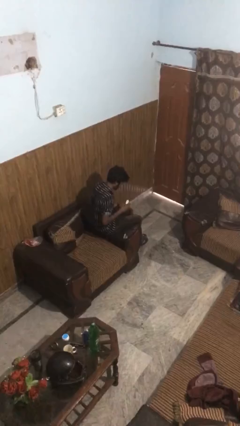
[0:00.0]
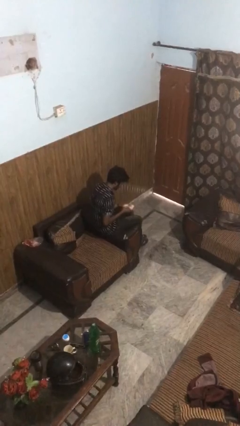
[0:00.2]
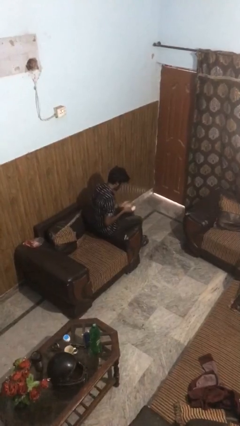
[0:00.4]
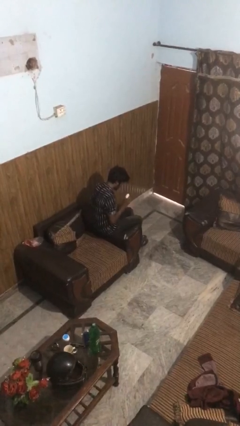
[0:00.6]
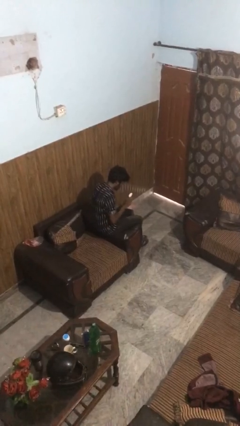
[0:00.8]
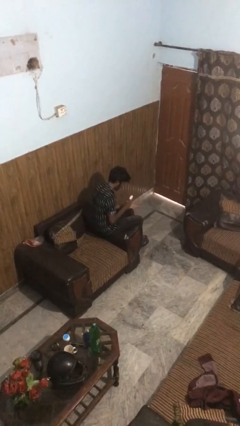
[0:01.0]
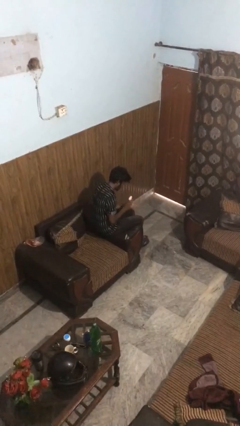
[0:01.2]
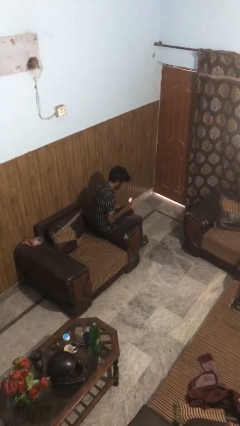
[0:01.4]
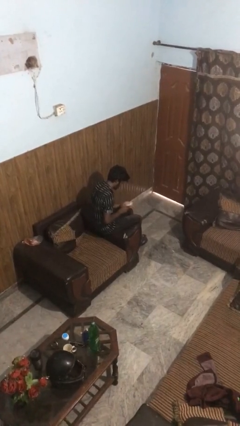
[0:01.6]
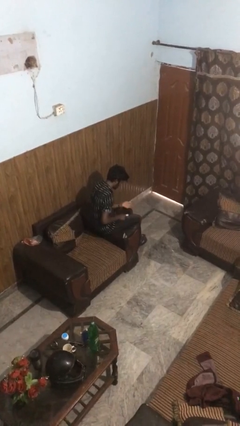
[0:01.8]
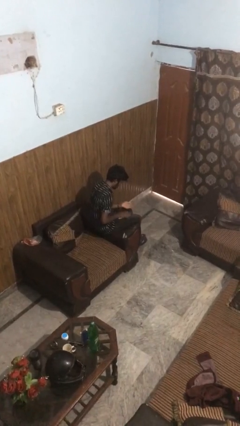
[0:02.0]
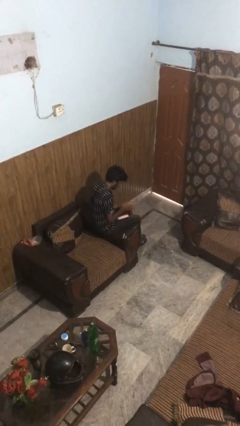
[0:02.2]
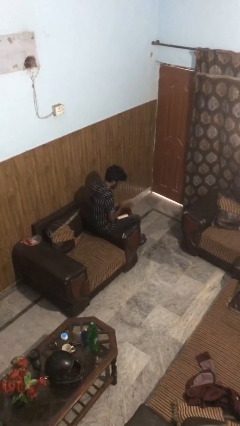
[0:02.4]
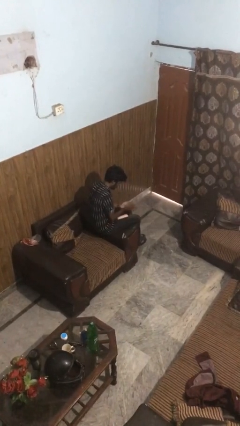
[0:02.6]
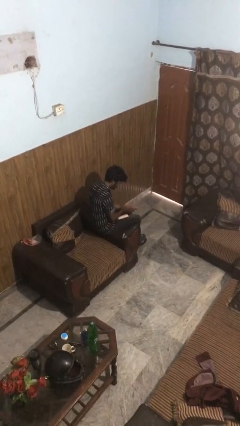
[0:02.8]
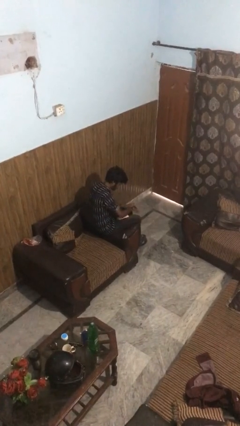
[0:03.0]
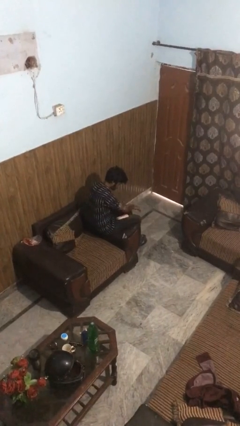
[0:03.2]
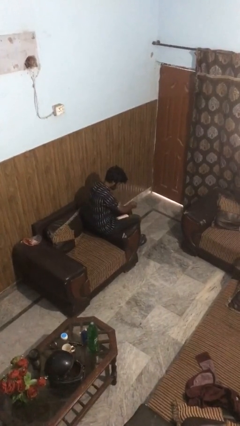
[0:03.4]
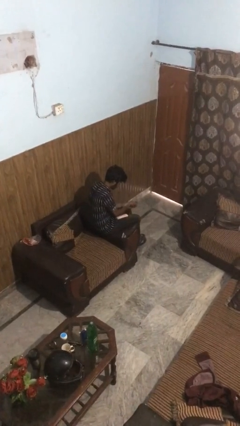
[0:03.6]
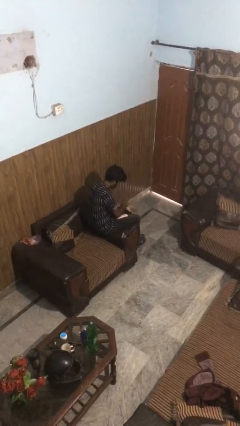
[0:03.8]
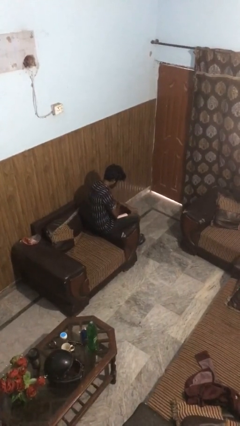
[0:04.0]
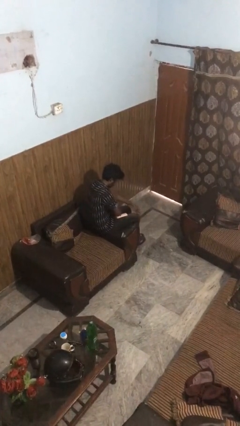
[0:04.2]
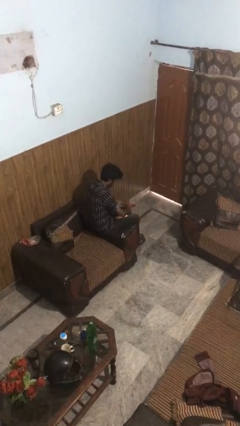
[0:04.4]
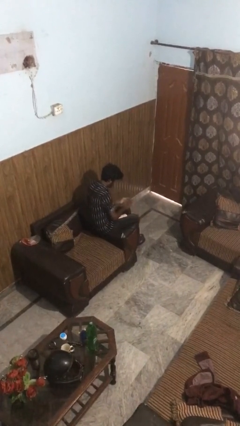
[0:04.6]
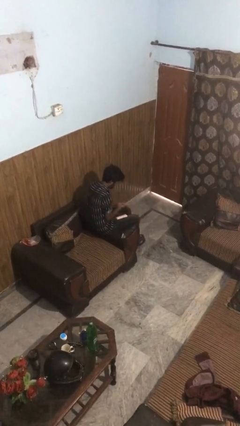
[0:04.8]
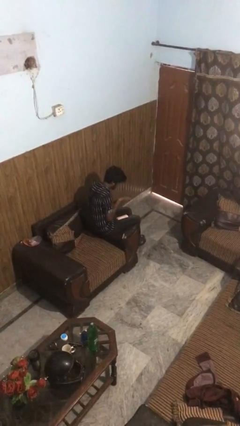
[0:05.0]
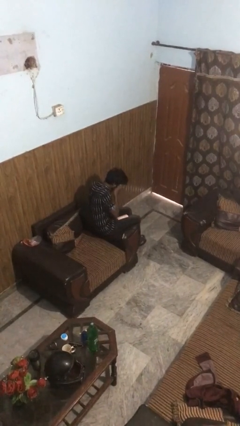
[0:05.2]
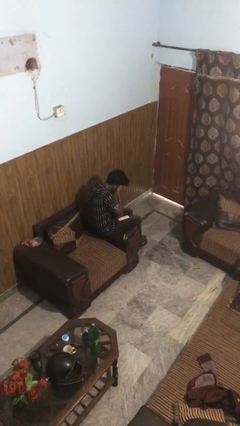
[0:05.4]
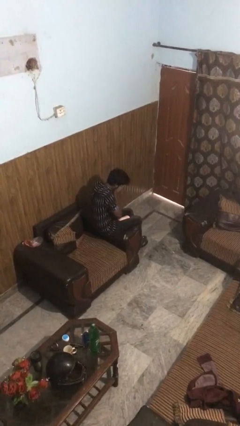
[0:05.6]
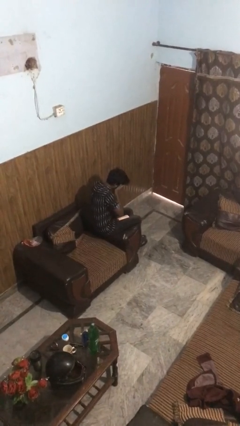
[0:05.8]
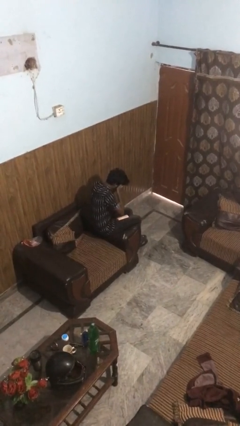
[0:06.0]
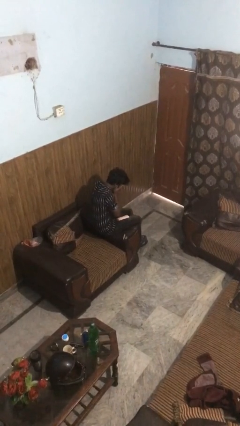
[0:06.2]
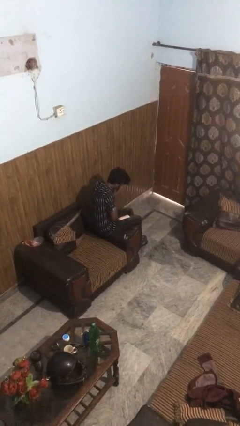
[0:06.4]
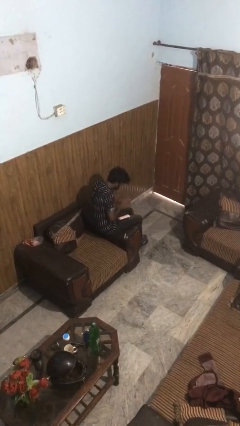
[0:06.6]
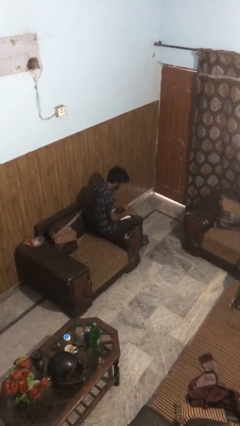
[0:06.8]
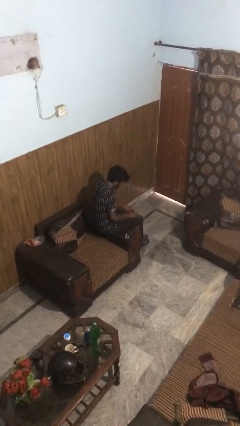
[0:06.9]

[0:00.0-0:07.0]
person applies sunscreen

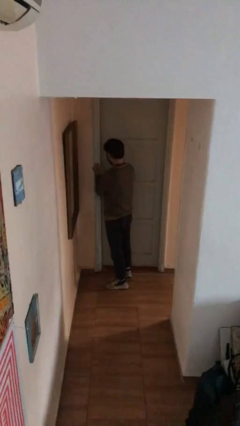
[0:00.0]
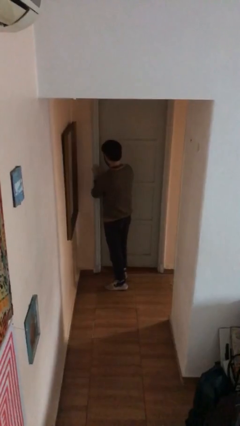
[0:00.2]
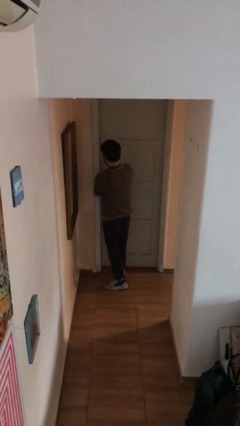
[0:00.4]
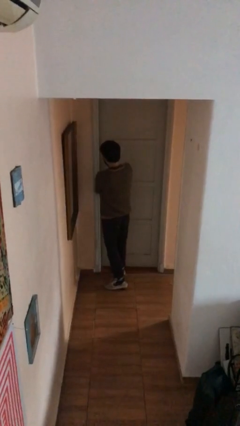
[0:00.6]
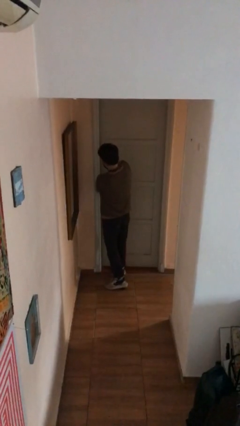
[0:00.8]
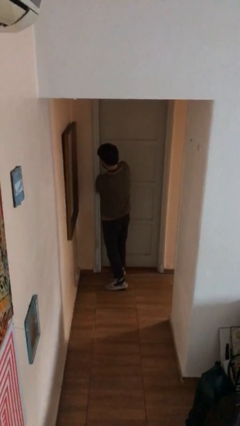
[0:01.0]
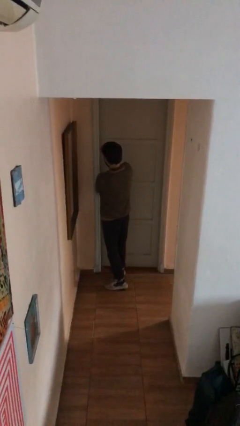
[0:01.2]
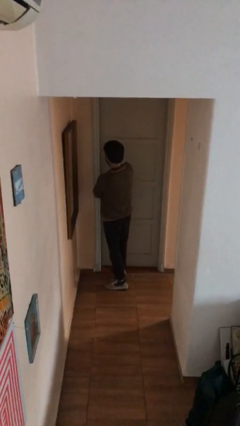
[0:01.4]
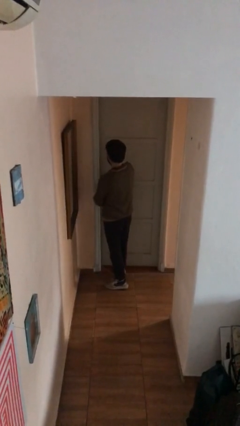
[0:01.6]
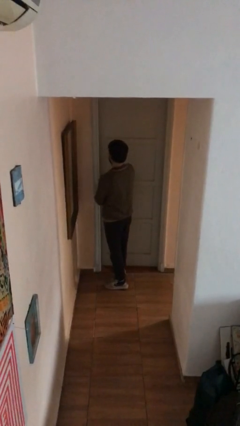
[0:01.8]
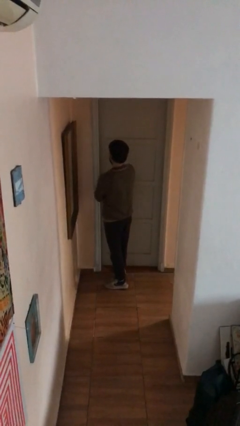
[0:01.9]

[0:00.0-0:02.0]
person locks door with keys

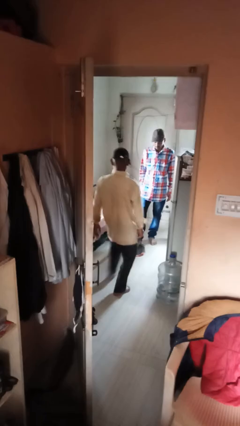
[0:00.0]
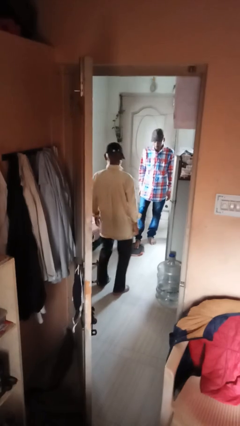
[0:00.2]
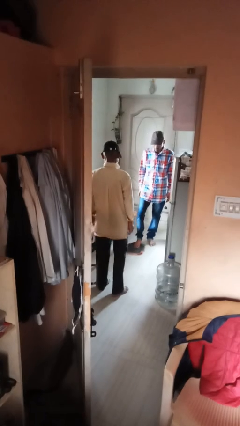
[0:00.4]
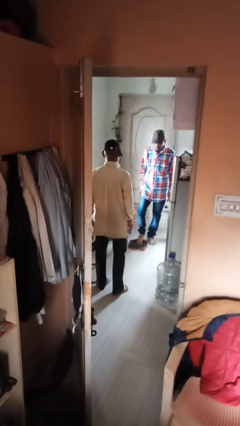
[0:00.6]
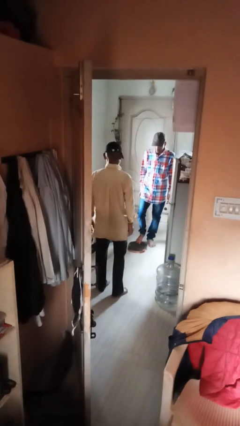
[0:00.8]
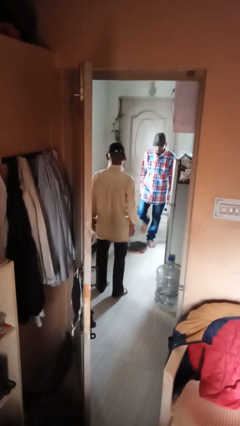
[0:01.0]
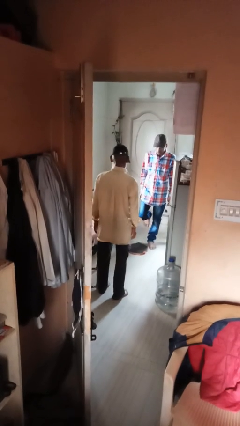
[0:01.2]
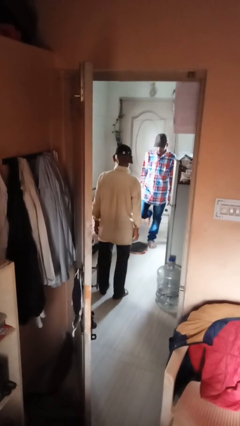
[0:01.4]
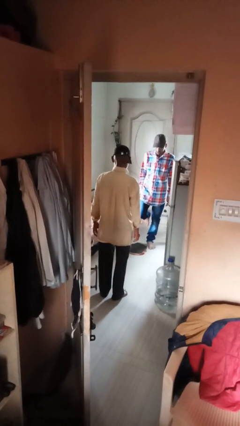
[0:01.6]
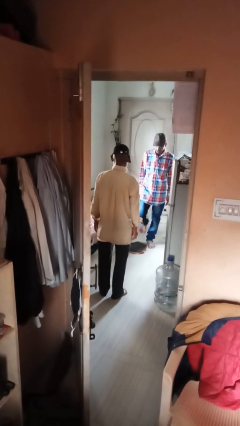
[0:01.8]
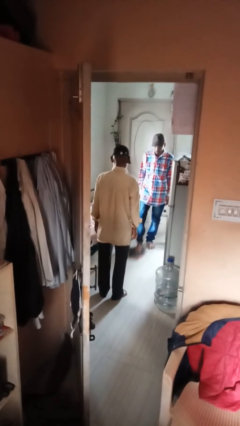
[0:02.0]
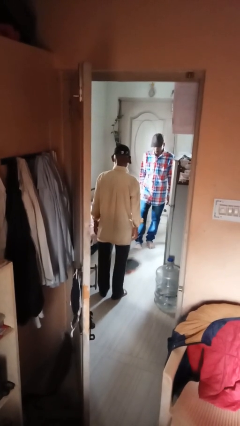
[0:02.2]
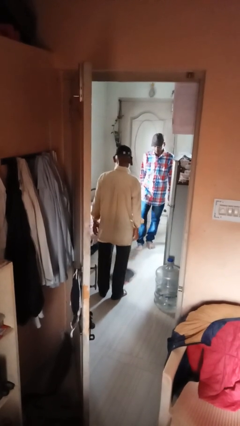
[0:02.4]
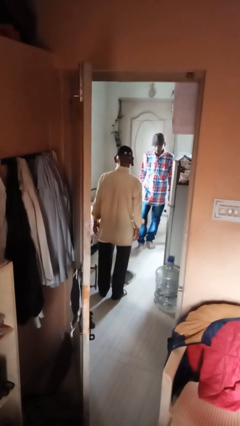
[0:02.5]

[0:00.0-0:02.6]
person kicks object to person

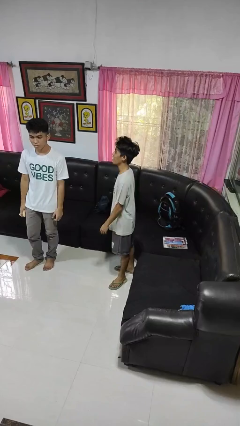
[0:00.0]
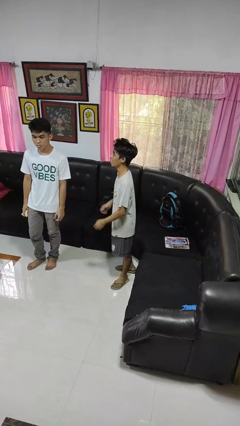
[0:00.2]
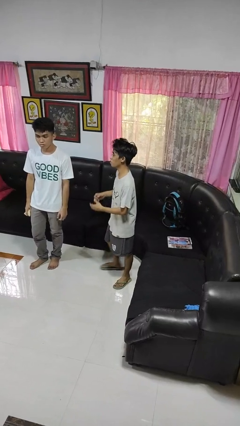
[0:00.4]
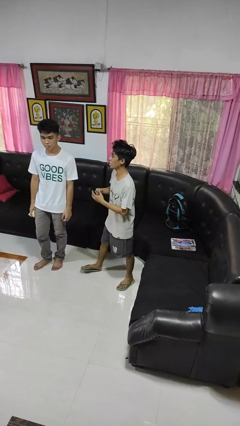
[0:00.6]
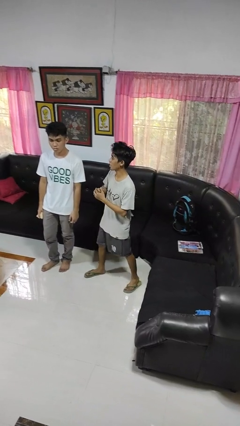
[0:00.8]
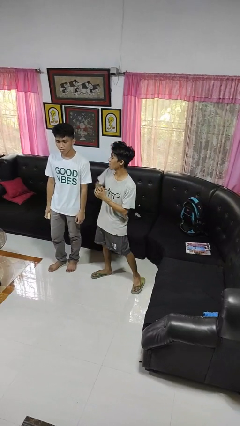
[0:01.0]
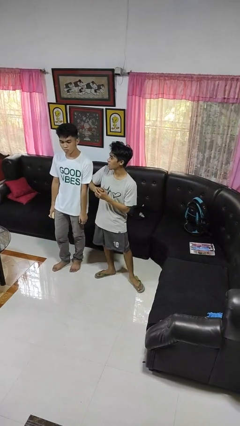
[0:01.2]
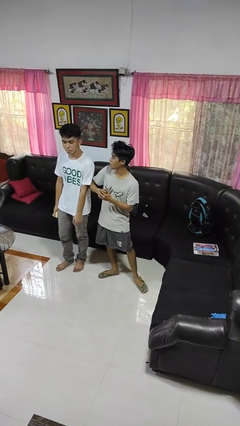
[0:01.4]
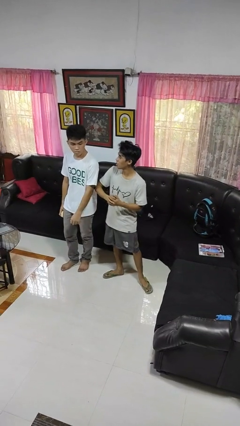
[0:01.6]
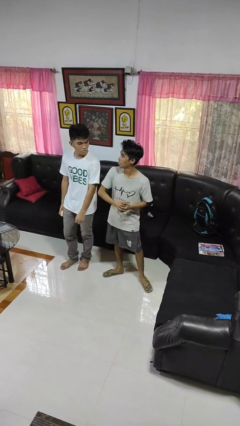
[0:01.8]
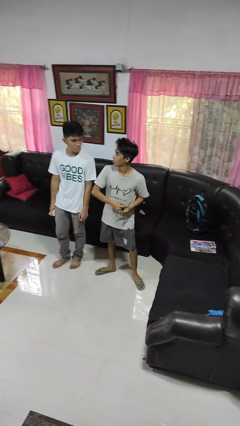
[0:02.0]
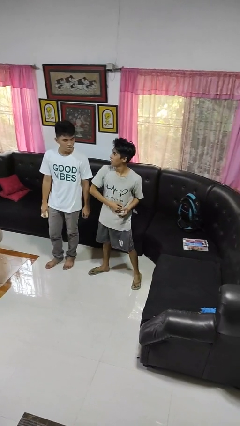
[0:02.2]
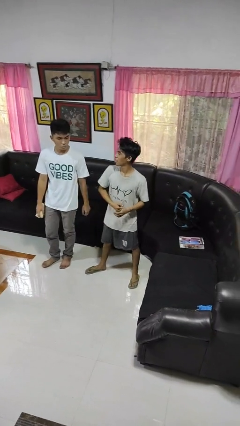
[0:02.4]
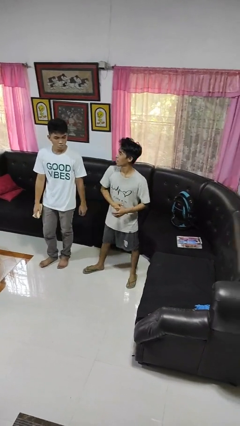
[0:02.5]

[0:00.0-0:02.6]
person nudges person with elbow

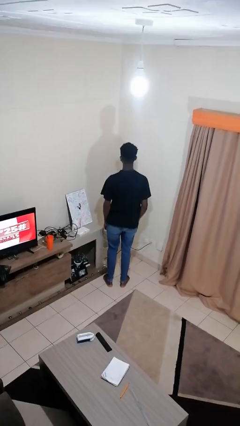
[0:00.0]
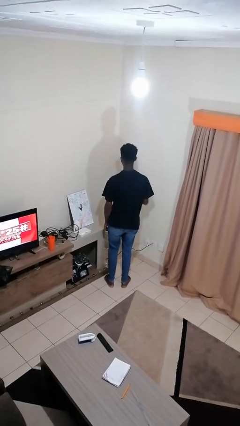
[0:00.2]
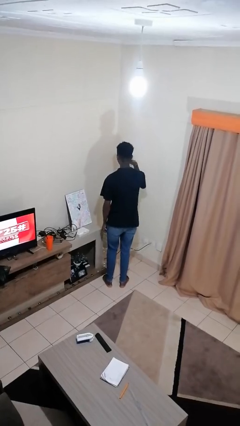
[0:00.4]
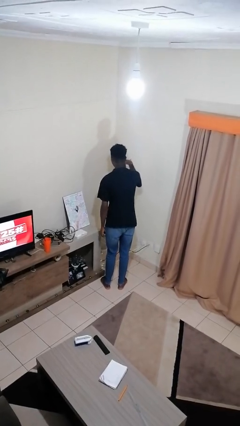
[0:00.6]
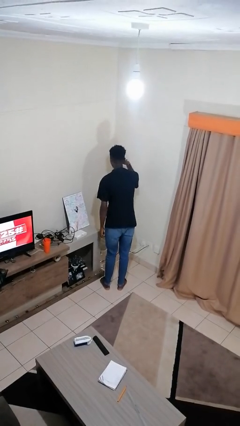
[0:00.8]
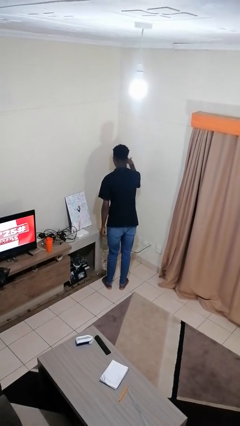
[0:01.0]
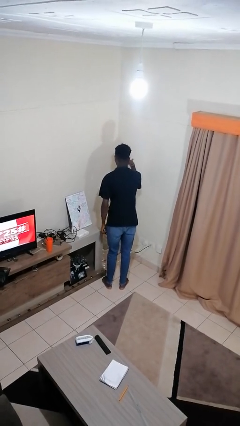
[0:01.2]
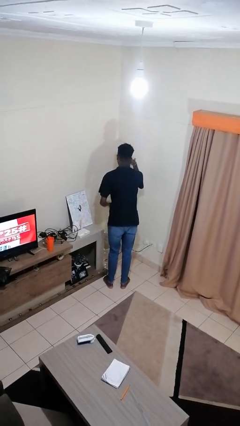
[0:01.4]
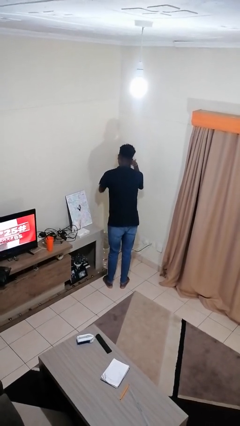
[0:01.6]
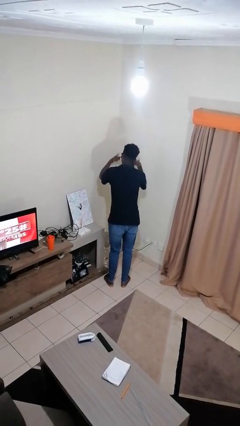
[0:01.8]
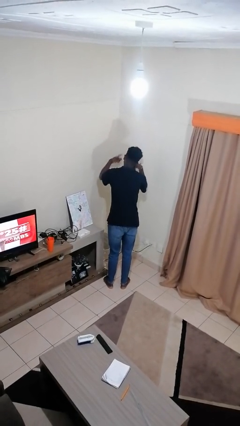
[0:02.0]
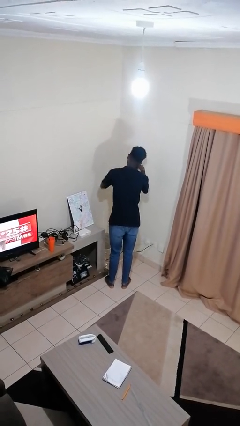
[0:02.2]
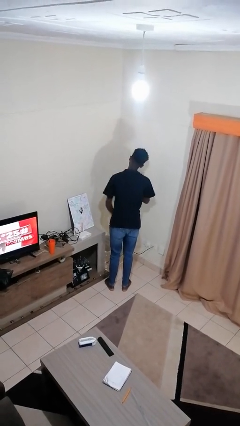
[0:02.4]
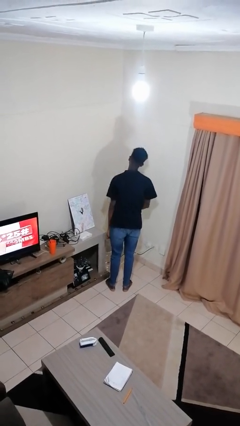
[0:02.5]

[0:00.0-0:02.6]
person gestures call me

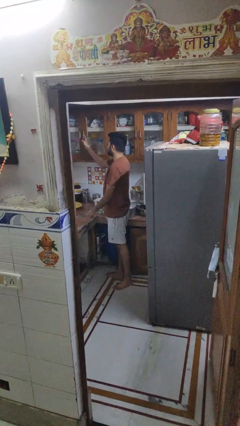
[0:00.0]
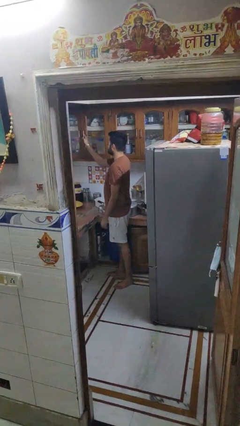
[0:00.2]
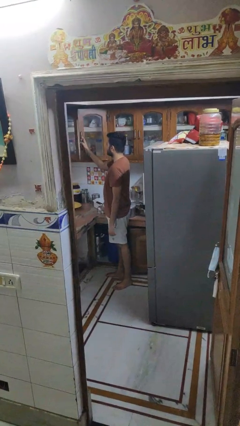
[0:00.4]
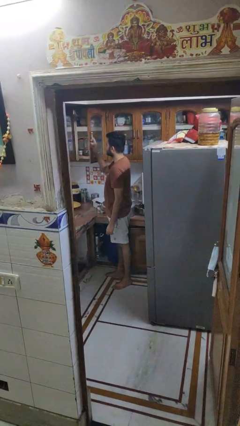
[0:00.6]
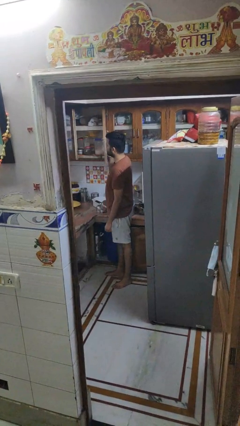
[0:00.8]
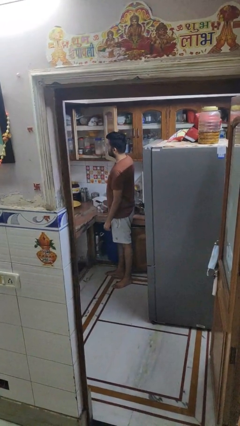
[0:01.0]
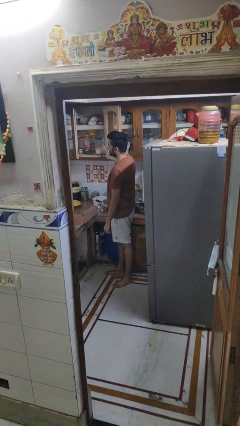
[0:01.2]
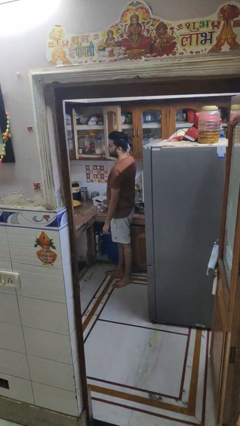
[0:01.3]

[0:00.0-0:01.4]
person opens cabinet
